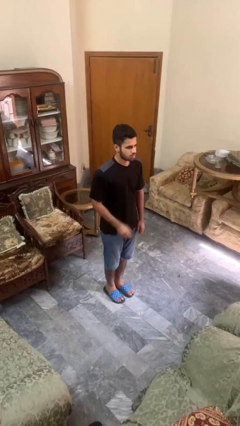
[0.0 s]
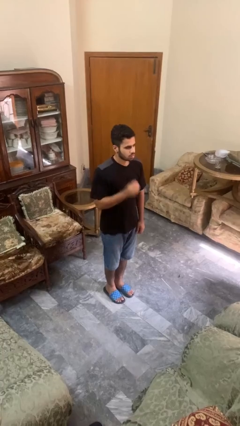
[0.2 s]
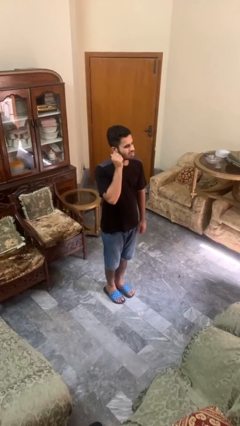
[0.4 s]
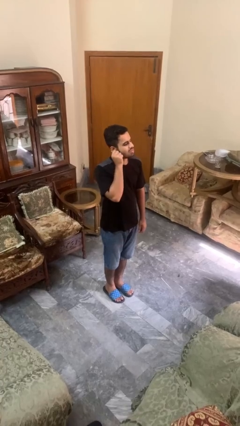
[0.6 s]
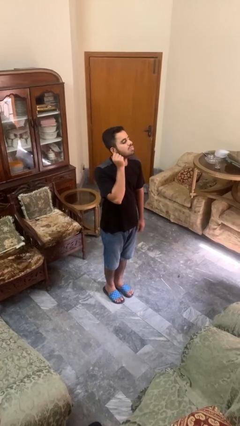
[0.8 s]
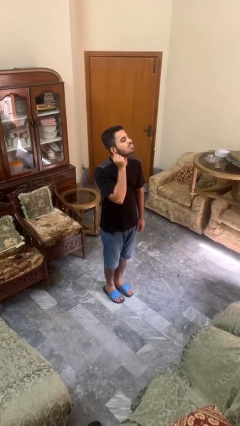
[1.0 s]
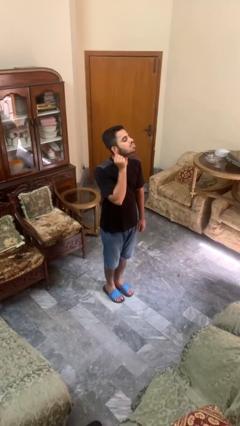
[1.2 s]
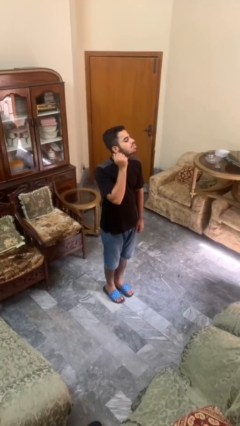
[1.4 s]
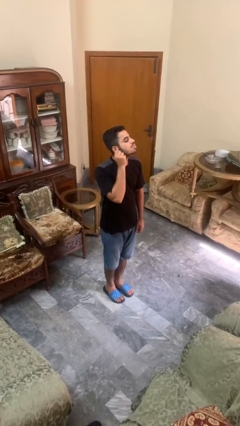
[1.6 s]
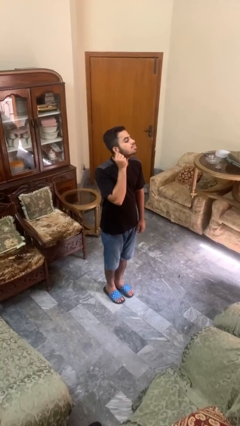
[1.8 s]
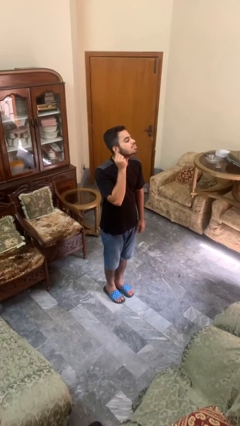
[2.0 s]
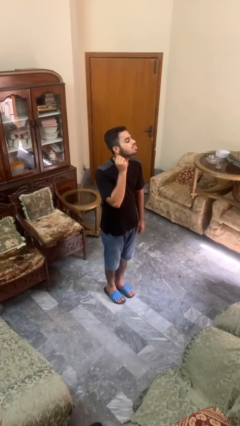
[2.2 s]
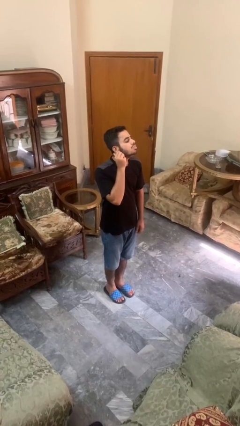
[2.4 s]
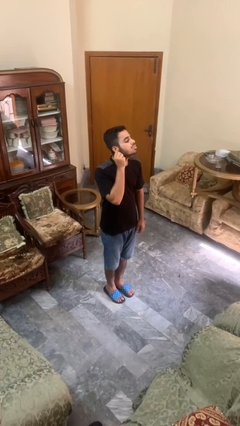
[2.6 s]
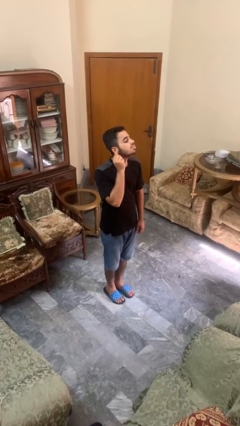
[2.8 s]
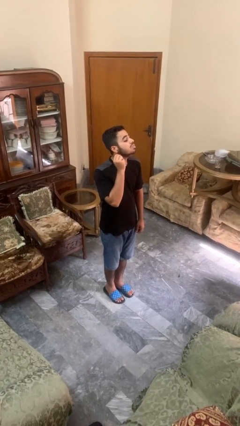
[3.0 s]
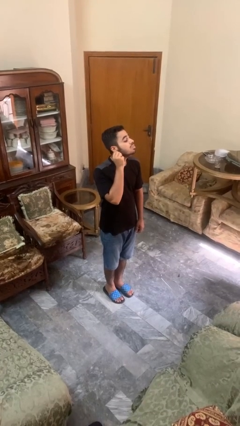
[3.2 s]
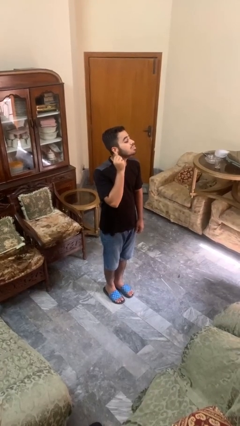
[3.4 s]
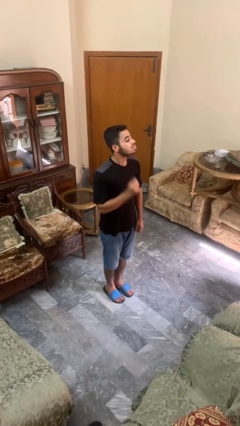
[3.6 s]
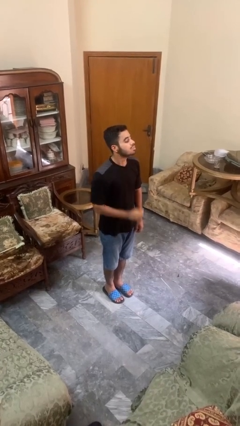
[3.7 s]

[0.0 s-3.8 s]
person touches earlobe

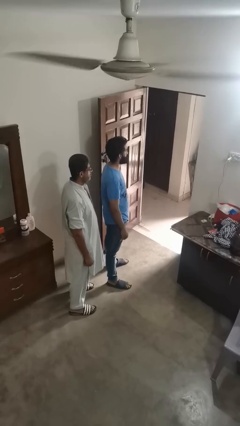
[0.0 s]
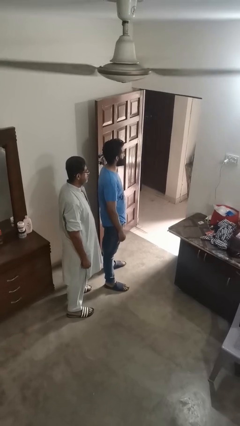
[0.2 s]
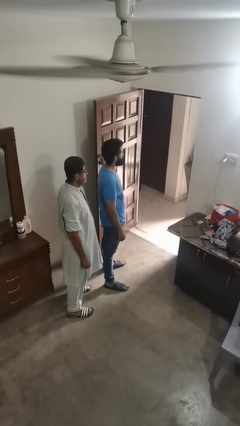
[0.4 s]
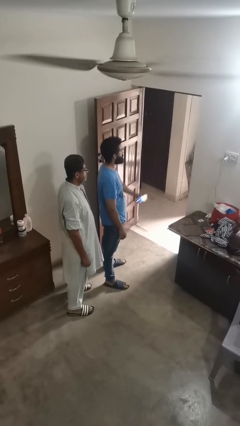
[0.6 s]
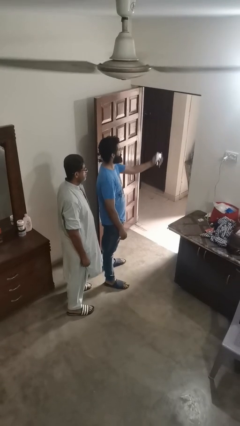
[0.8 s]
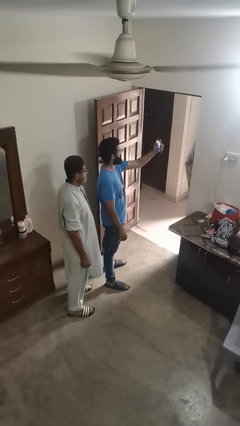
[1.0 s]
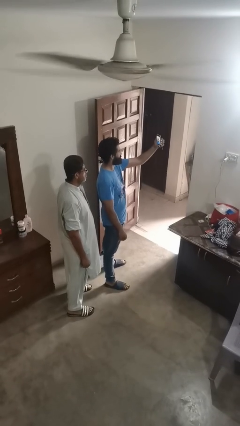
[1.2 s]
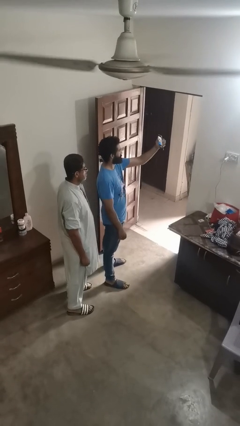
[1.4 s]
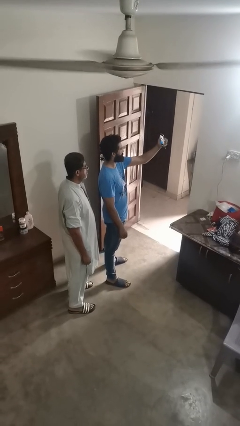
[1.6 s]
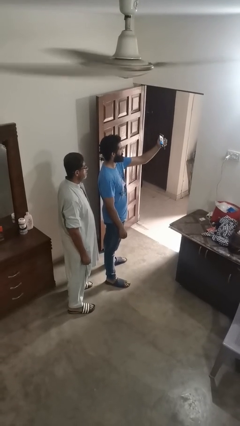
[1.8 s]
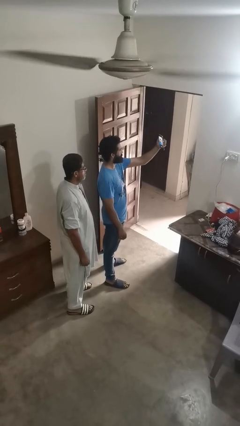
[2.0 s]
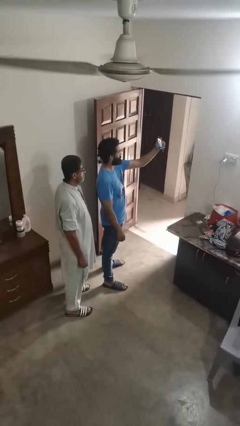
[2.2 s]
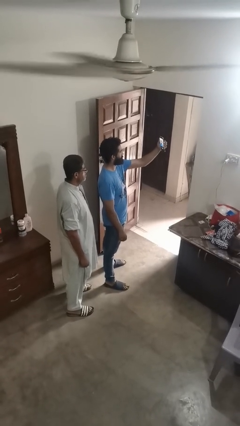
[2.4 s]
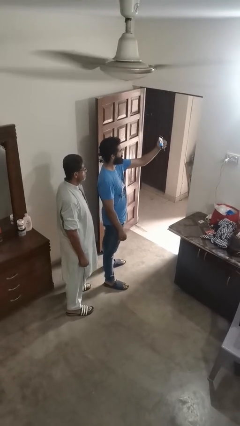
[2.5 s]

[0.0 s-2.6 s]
person takes selfie with person

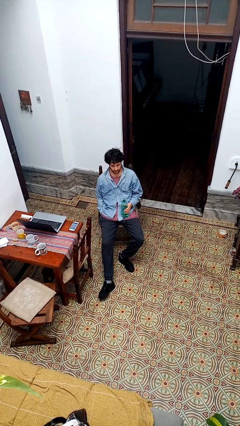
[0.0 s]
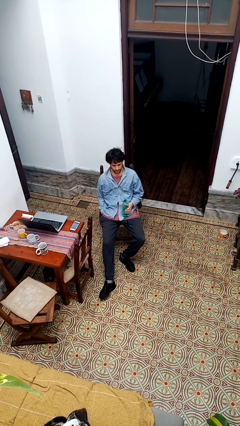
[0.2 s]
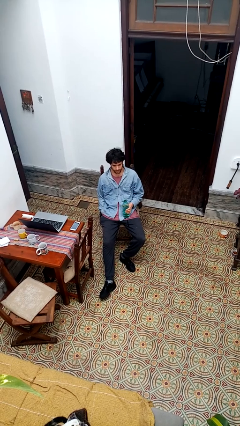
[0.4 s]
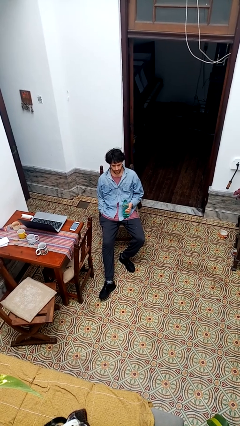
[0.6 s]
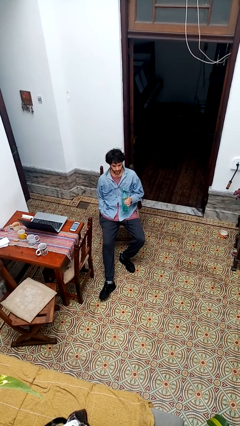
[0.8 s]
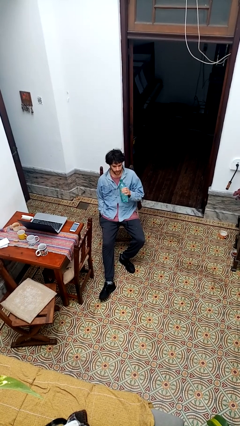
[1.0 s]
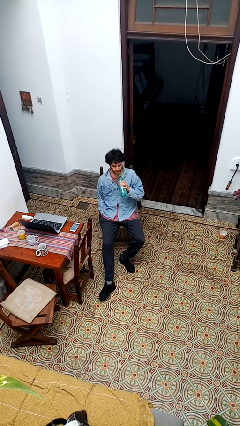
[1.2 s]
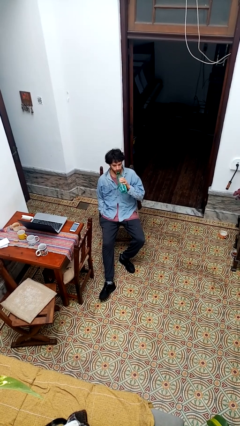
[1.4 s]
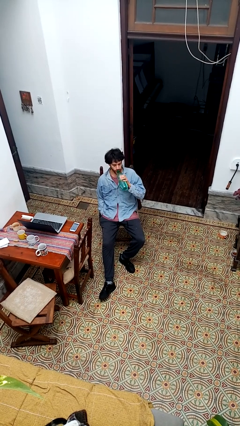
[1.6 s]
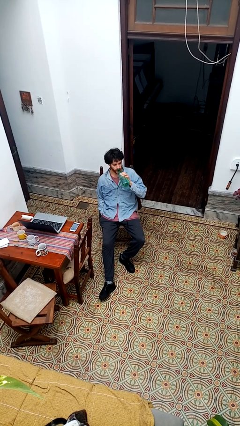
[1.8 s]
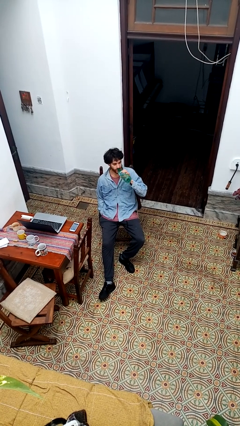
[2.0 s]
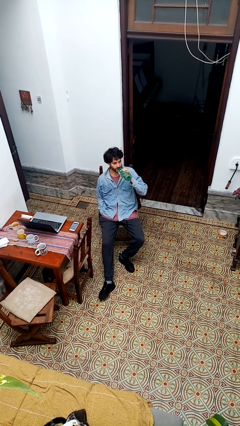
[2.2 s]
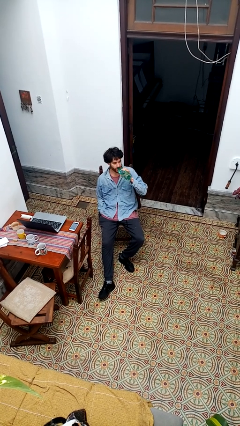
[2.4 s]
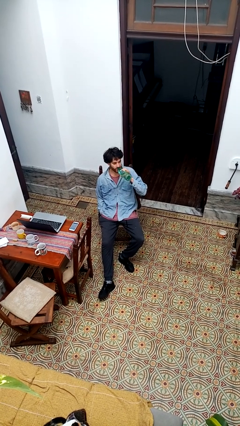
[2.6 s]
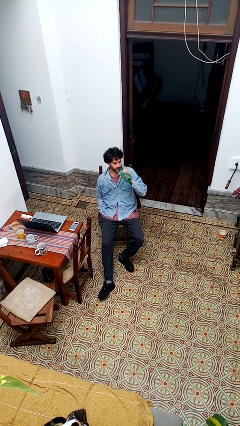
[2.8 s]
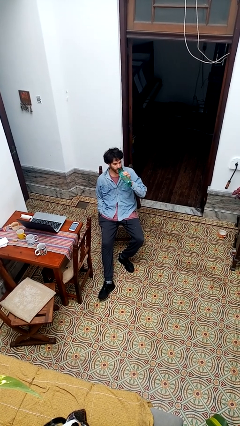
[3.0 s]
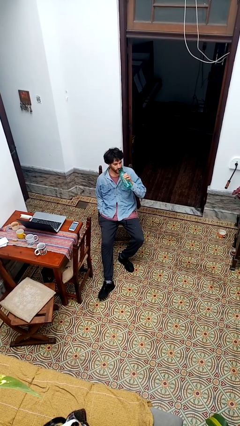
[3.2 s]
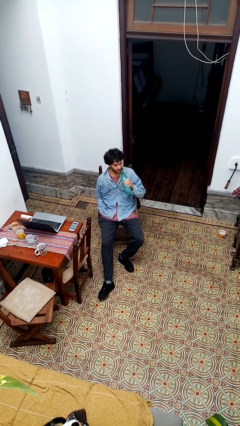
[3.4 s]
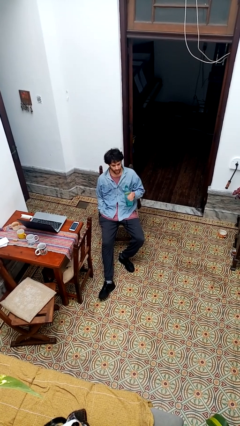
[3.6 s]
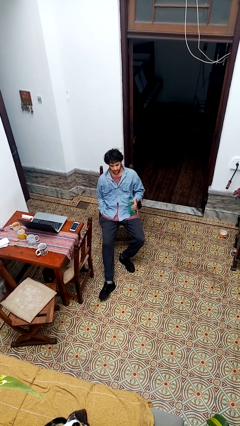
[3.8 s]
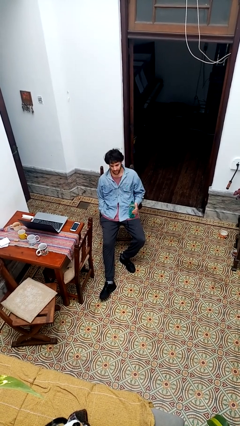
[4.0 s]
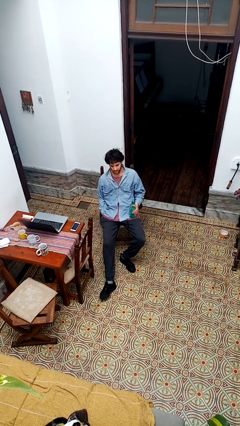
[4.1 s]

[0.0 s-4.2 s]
person drinks from bottle

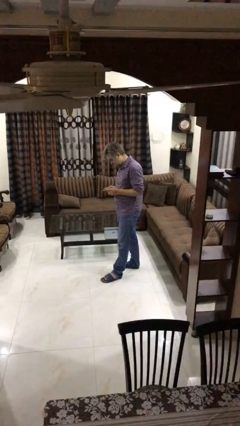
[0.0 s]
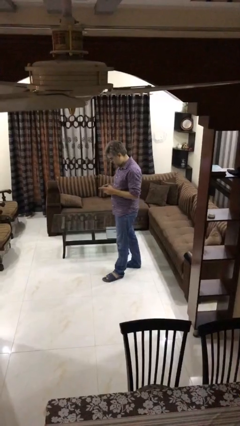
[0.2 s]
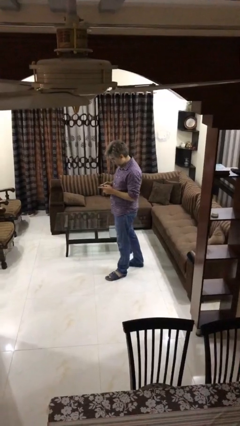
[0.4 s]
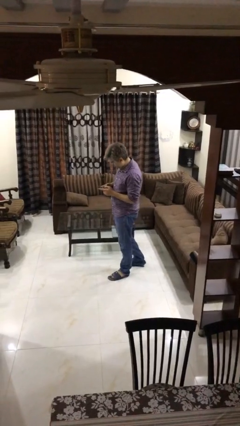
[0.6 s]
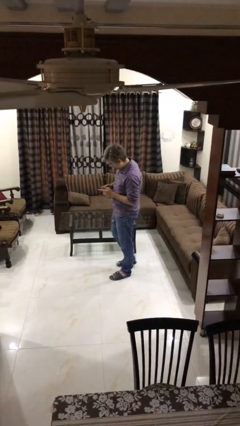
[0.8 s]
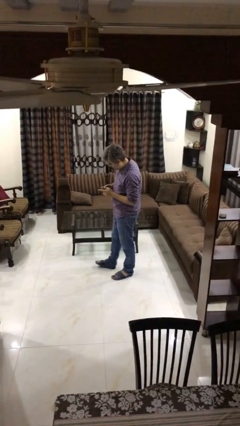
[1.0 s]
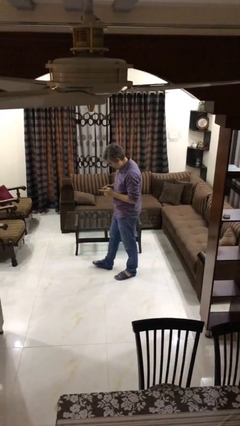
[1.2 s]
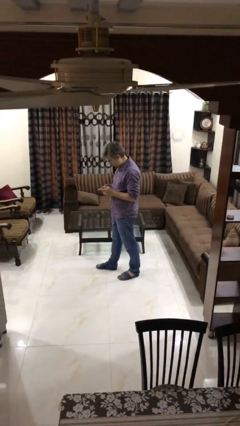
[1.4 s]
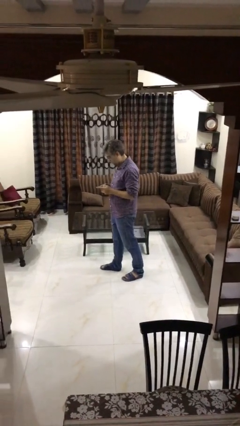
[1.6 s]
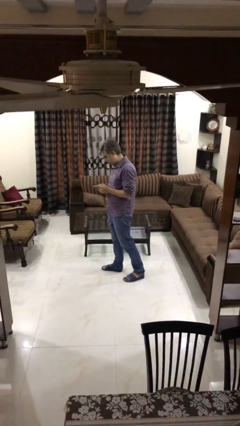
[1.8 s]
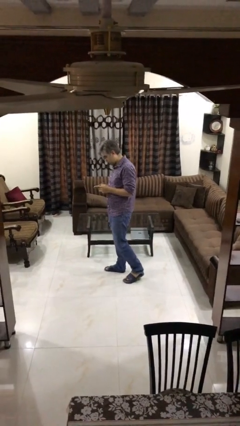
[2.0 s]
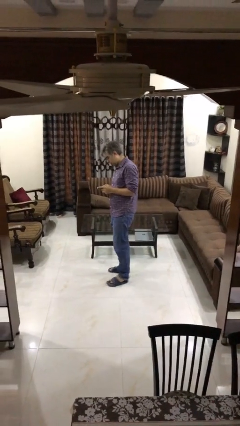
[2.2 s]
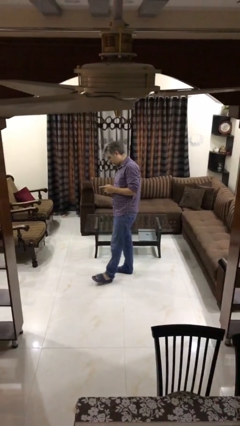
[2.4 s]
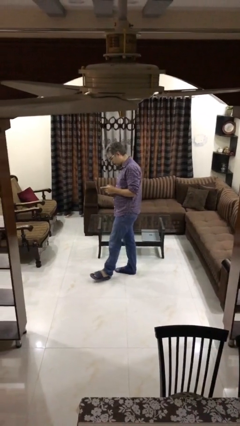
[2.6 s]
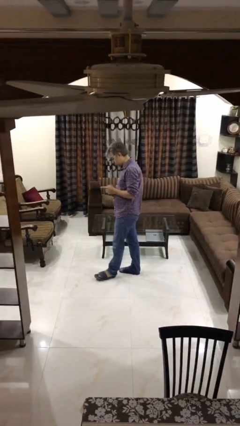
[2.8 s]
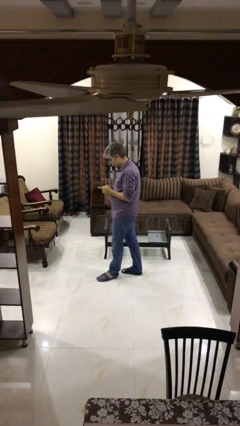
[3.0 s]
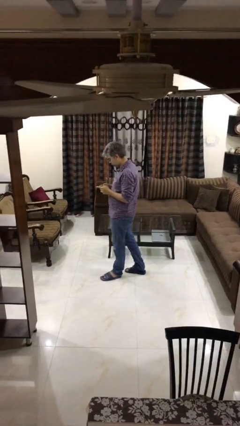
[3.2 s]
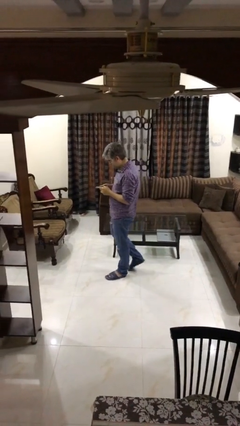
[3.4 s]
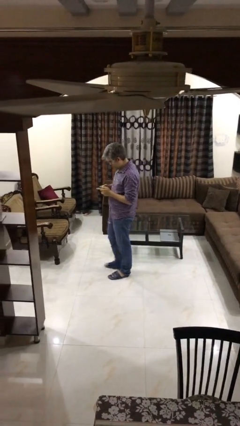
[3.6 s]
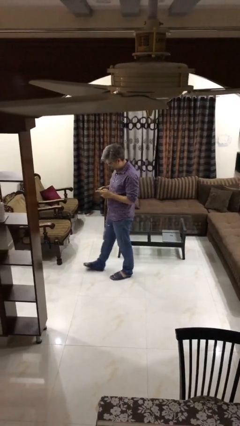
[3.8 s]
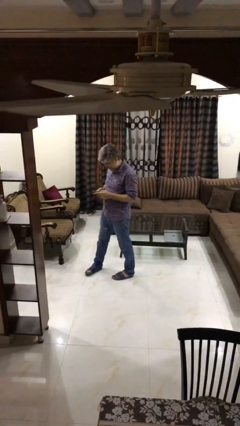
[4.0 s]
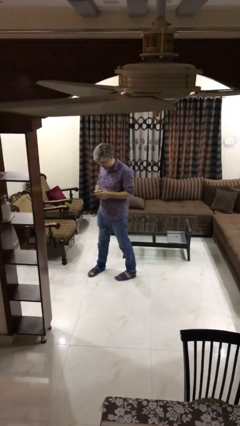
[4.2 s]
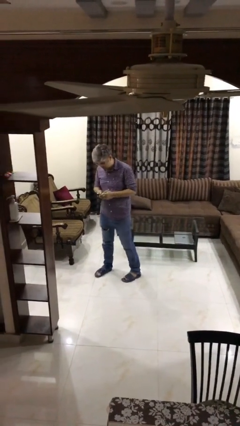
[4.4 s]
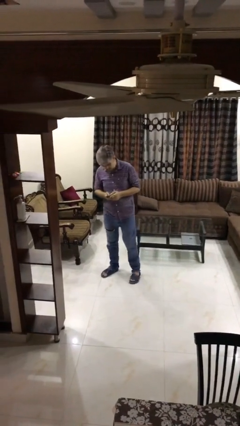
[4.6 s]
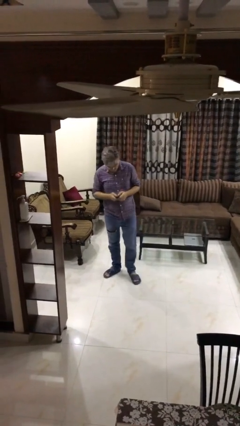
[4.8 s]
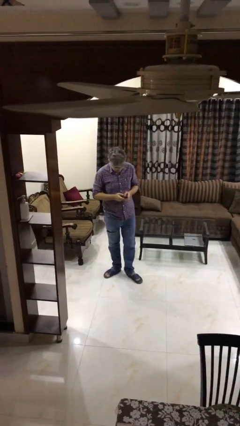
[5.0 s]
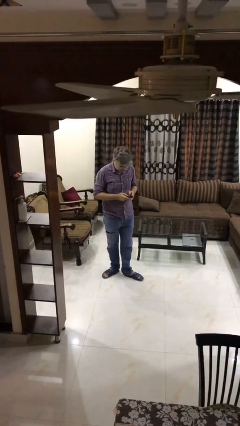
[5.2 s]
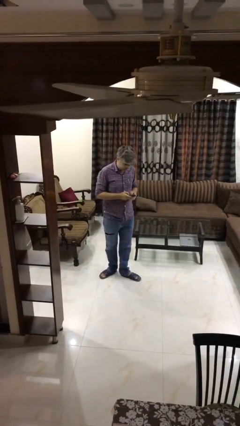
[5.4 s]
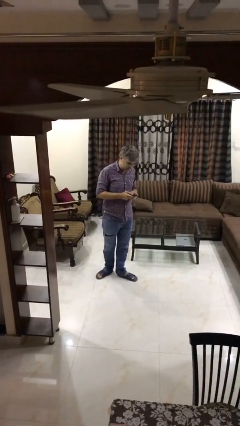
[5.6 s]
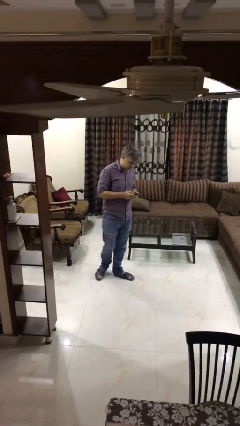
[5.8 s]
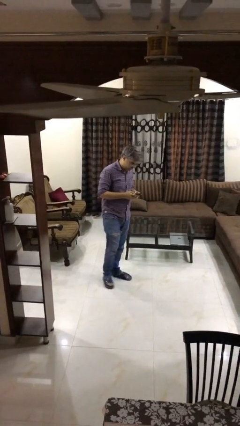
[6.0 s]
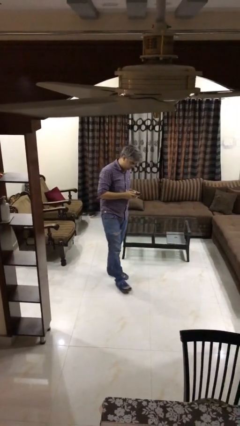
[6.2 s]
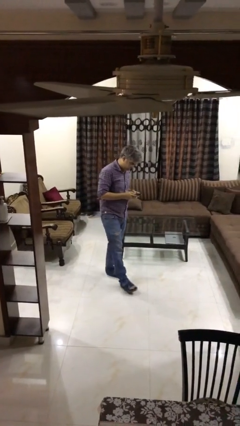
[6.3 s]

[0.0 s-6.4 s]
person texts on phone

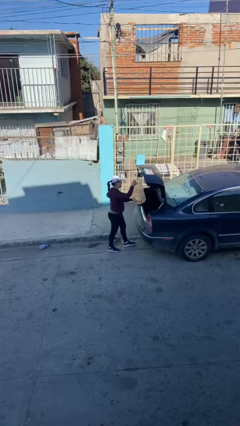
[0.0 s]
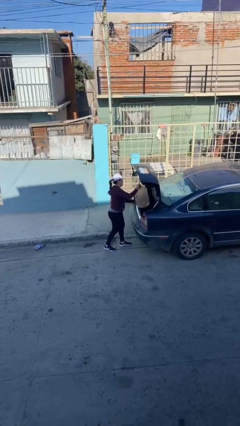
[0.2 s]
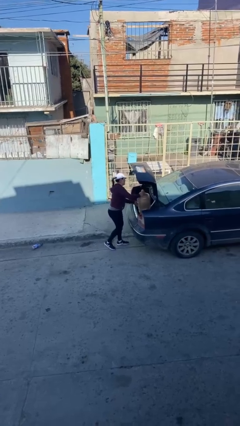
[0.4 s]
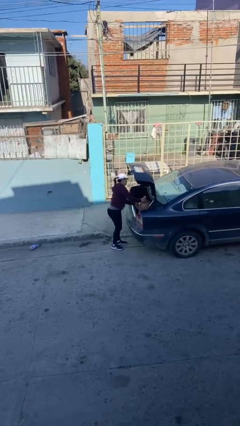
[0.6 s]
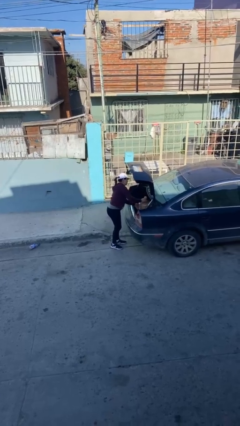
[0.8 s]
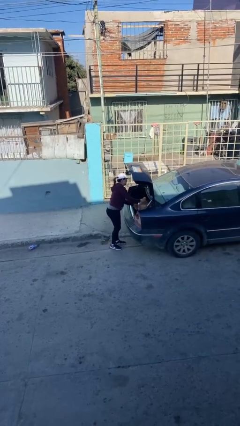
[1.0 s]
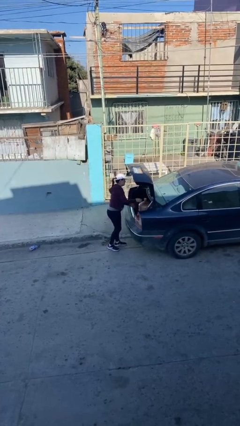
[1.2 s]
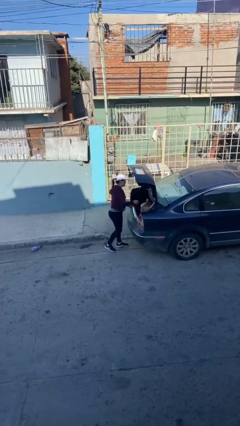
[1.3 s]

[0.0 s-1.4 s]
person loads car
